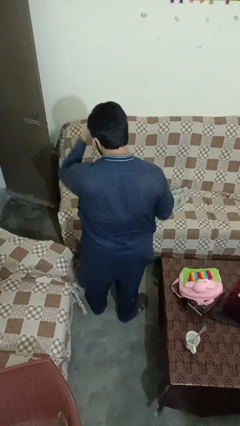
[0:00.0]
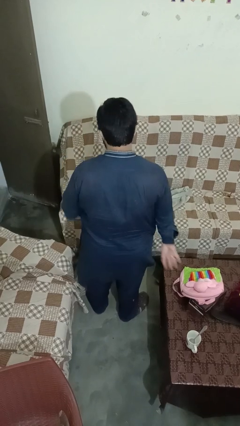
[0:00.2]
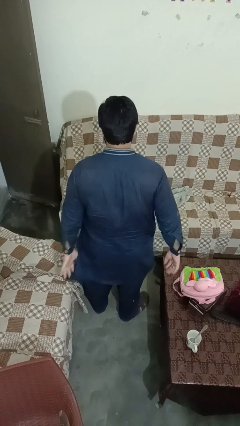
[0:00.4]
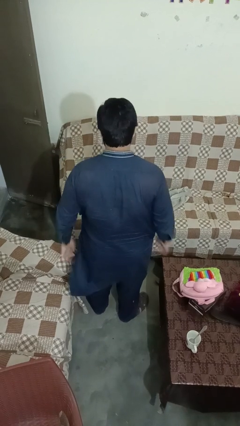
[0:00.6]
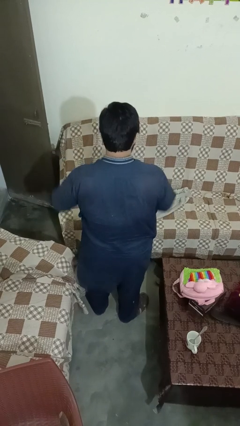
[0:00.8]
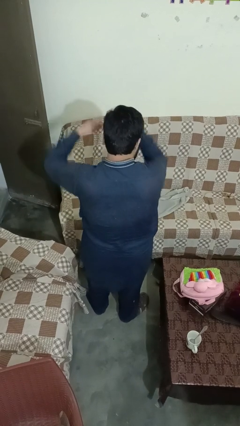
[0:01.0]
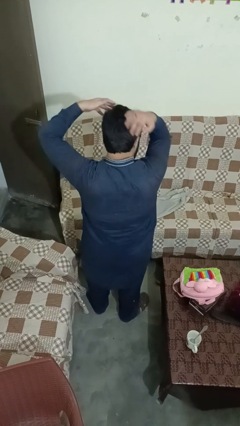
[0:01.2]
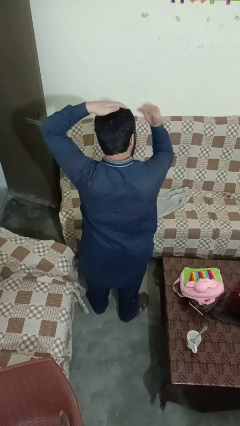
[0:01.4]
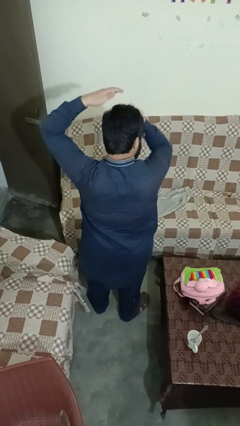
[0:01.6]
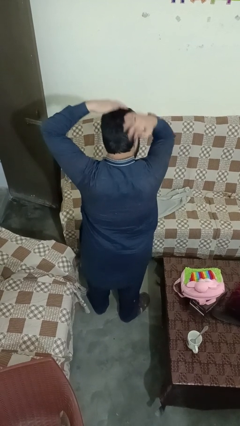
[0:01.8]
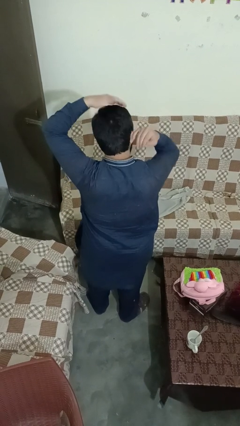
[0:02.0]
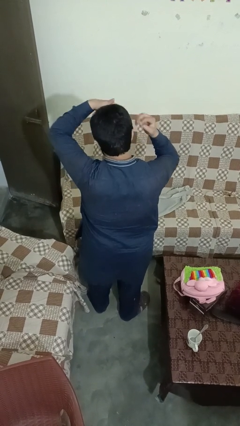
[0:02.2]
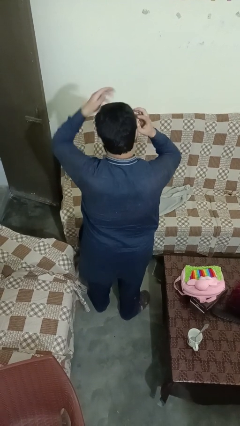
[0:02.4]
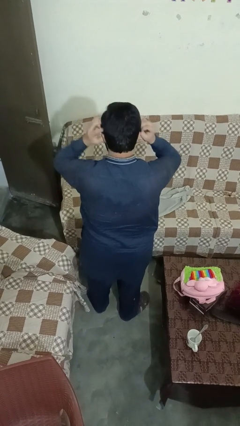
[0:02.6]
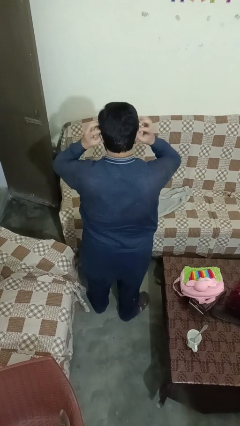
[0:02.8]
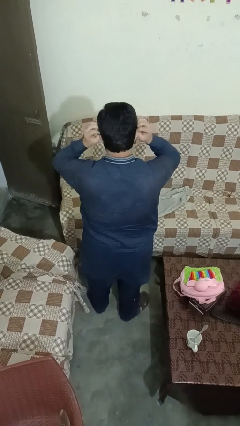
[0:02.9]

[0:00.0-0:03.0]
person strokes hair

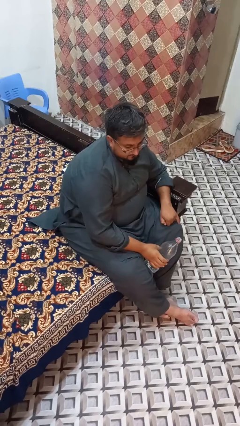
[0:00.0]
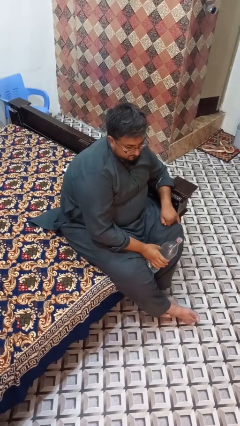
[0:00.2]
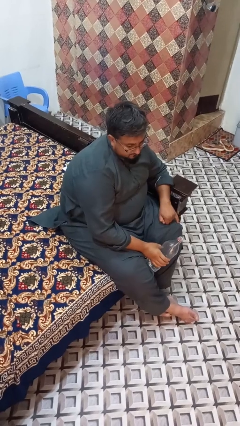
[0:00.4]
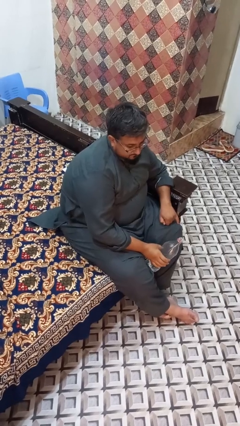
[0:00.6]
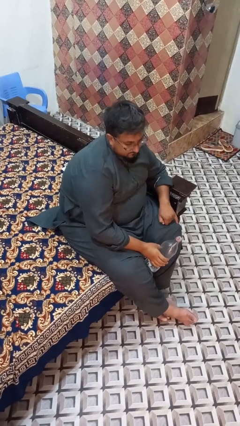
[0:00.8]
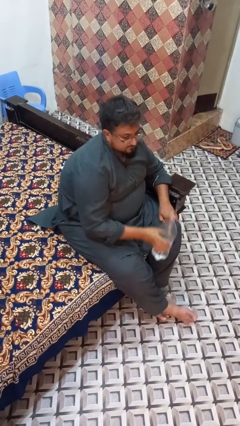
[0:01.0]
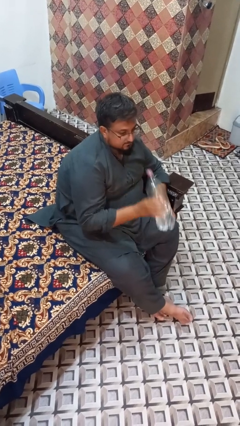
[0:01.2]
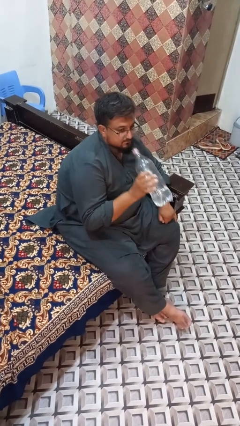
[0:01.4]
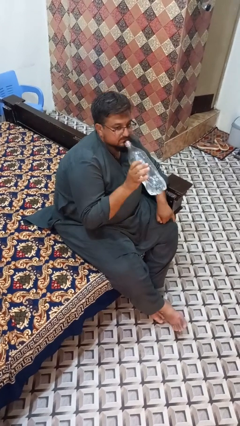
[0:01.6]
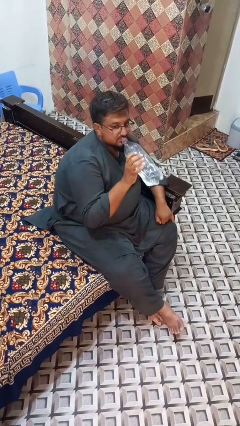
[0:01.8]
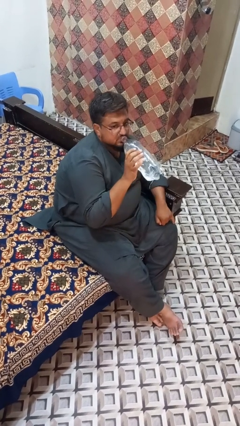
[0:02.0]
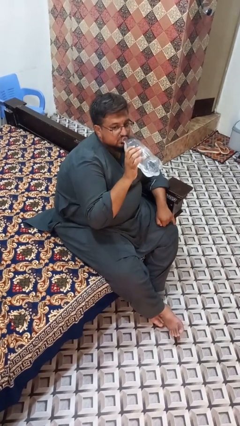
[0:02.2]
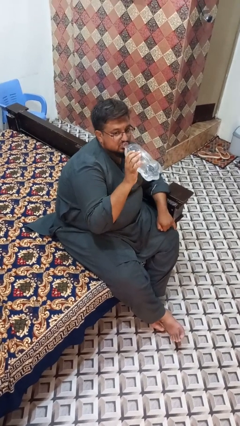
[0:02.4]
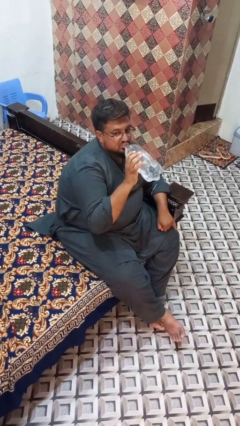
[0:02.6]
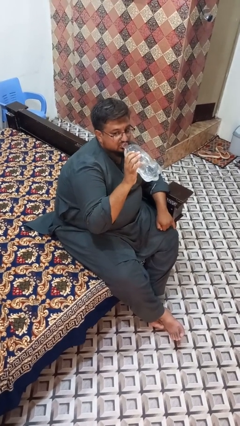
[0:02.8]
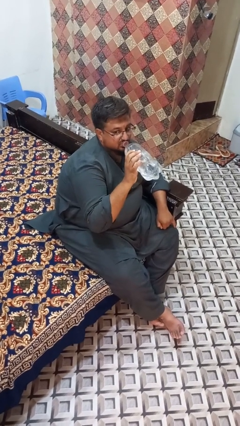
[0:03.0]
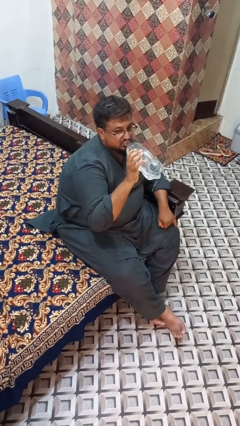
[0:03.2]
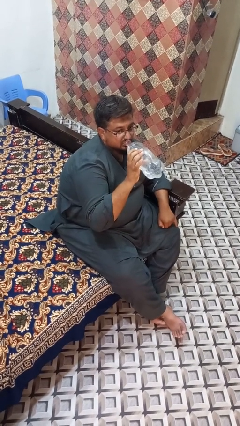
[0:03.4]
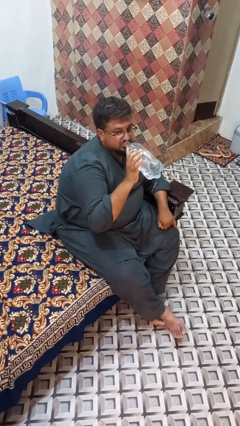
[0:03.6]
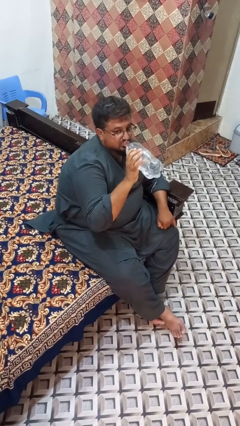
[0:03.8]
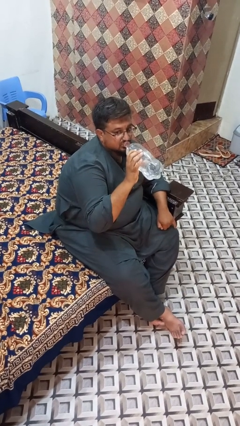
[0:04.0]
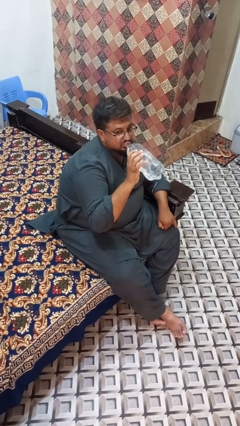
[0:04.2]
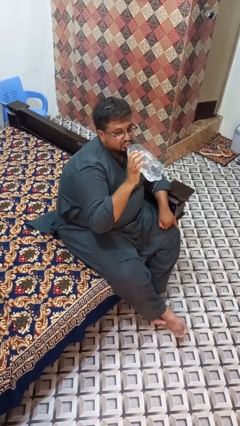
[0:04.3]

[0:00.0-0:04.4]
person drinks from bottle

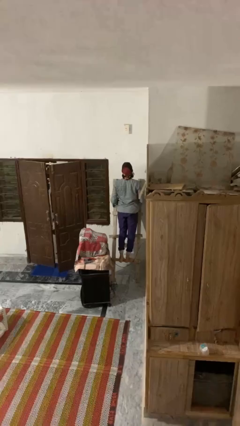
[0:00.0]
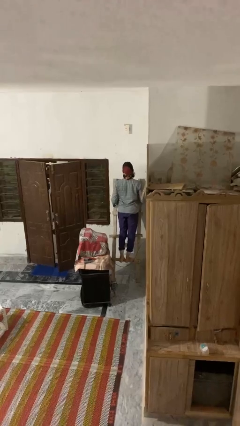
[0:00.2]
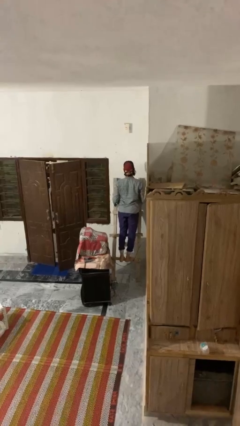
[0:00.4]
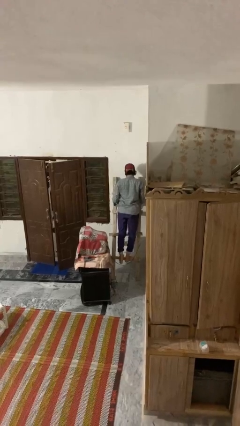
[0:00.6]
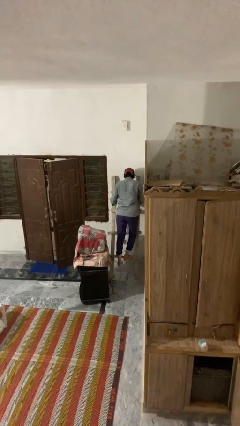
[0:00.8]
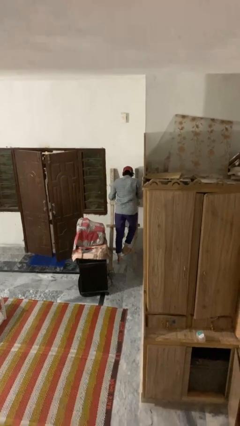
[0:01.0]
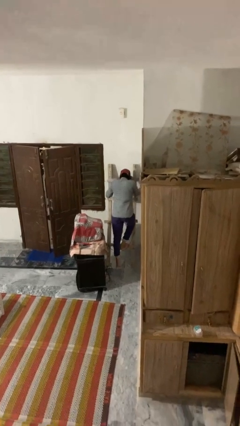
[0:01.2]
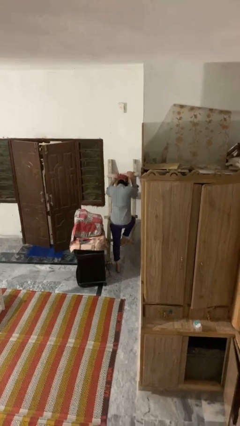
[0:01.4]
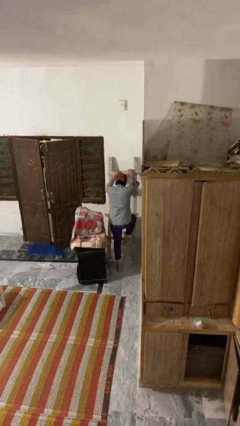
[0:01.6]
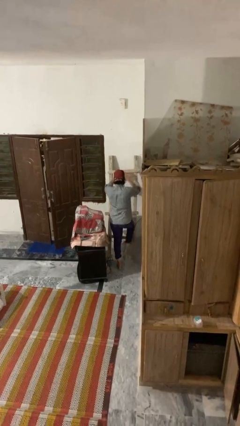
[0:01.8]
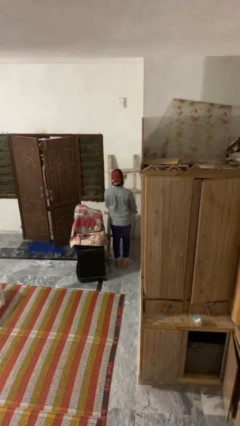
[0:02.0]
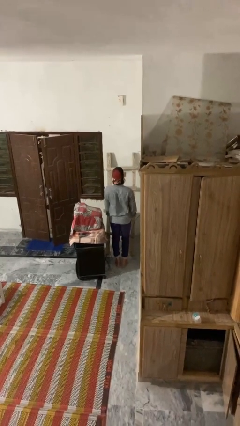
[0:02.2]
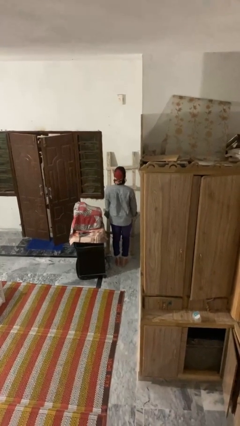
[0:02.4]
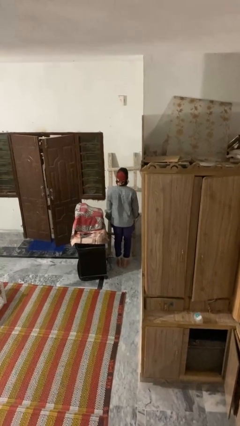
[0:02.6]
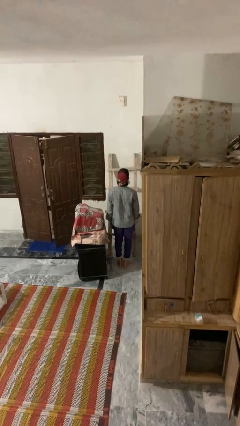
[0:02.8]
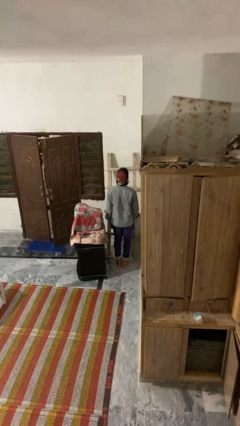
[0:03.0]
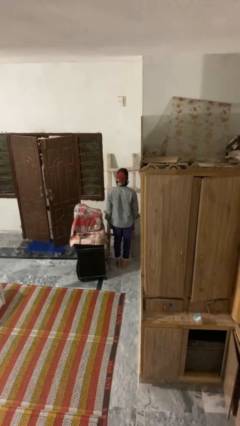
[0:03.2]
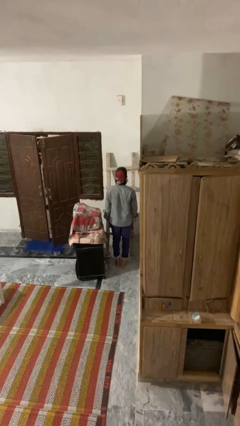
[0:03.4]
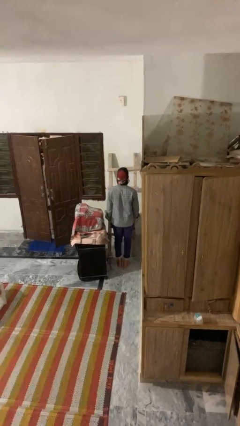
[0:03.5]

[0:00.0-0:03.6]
person climbs down ladder

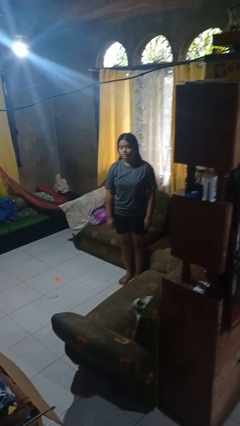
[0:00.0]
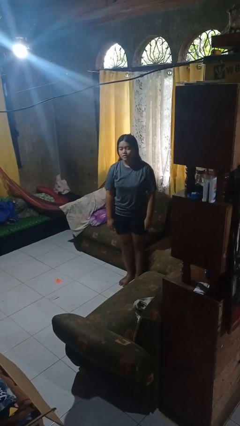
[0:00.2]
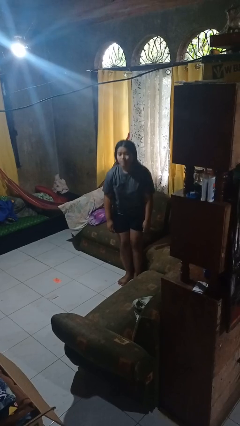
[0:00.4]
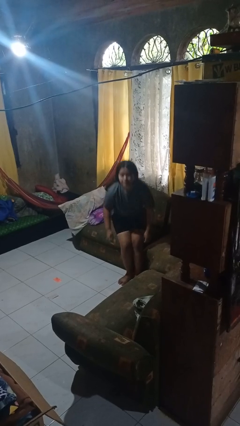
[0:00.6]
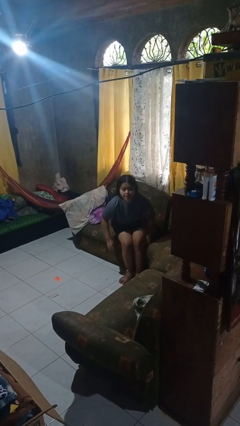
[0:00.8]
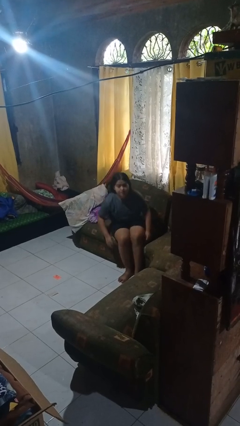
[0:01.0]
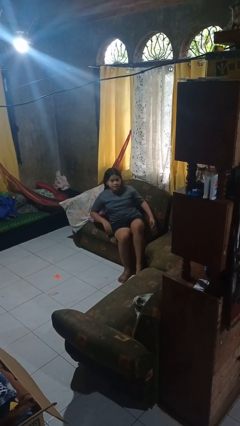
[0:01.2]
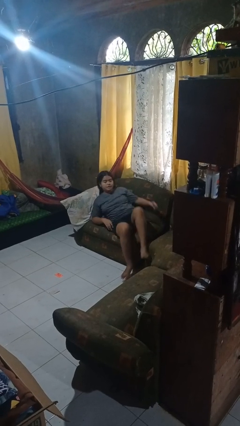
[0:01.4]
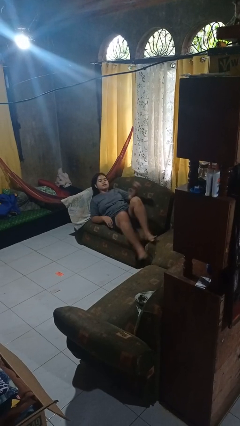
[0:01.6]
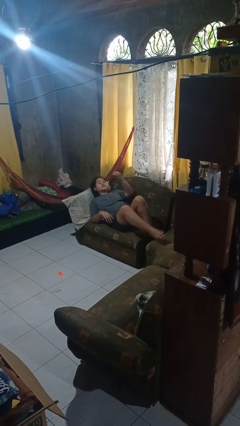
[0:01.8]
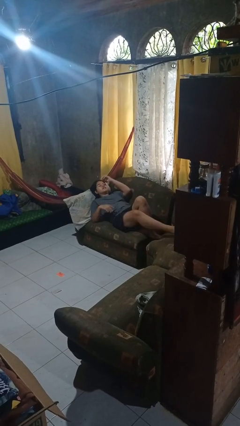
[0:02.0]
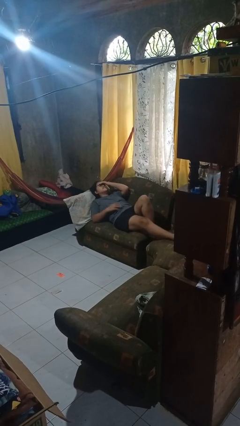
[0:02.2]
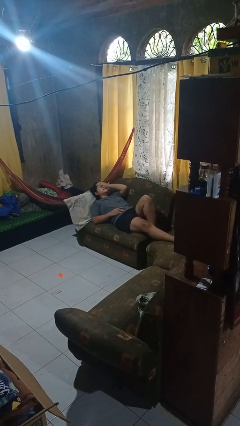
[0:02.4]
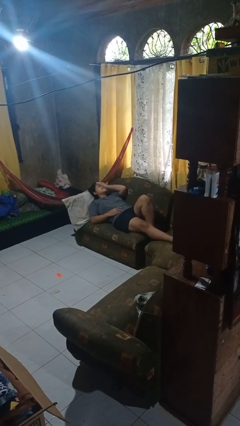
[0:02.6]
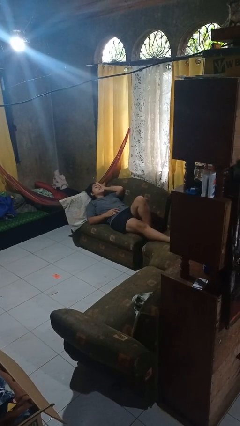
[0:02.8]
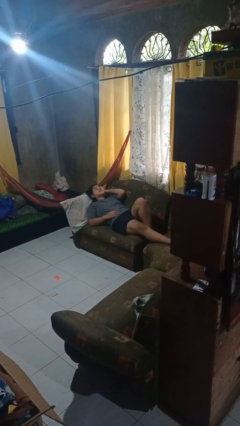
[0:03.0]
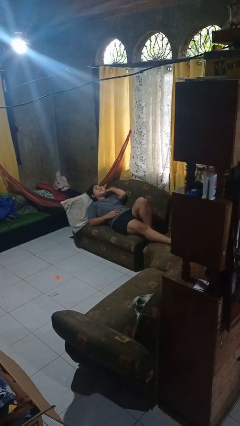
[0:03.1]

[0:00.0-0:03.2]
person lies down on couch

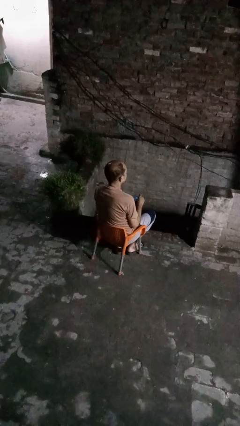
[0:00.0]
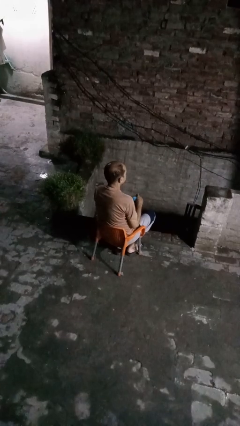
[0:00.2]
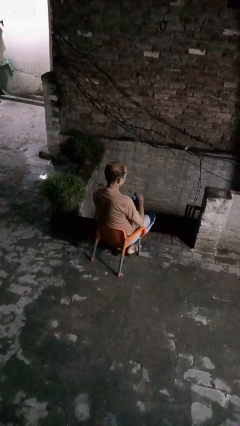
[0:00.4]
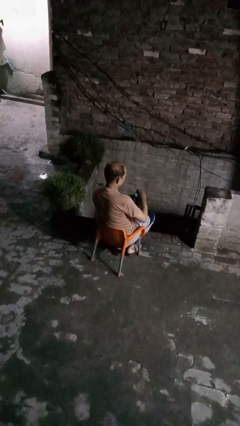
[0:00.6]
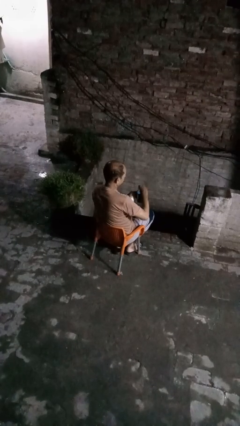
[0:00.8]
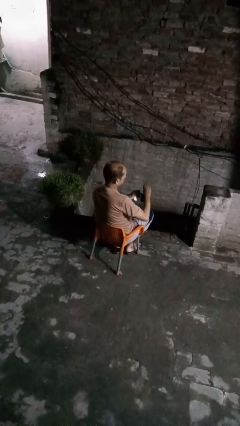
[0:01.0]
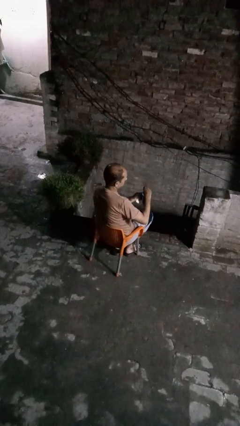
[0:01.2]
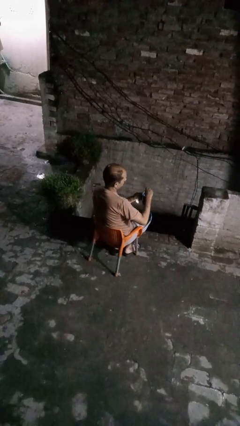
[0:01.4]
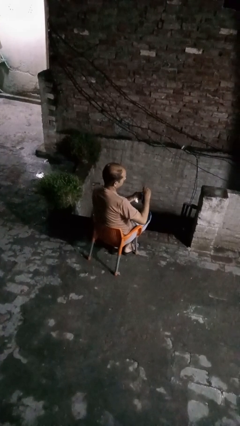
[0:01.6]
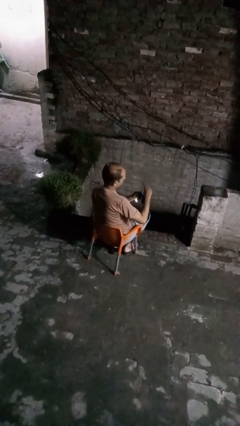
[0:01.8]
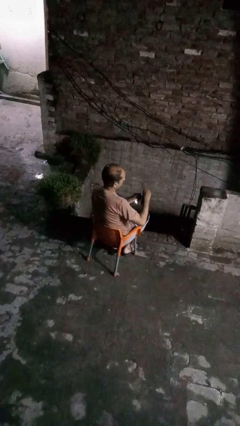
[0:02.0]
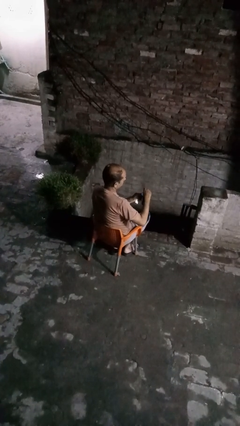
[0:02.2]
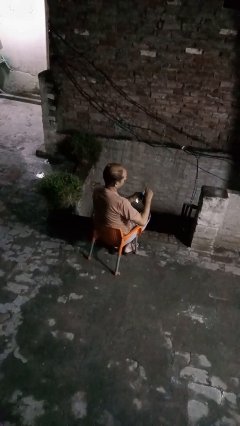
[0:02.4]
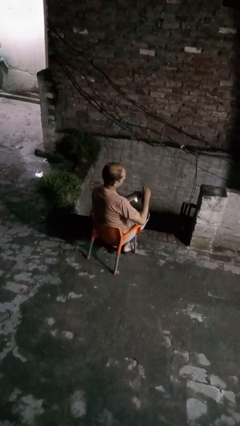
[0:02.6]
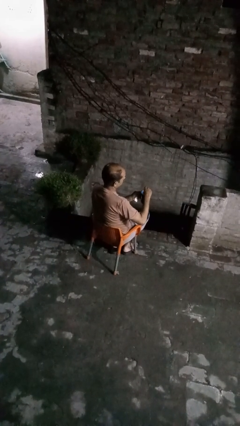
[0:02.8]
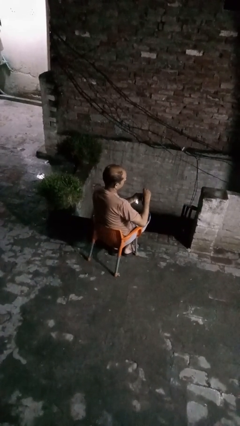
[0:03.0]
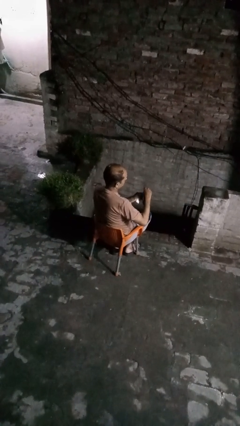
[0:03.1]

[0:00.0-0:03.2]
person stirs mug

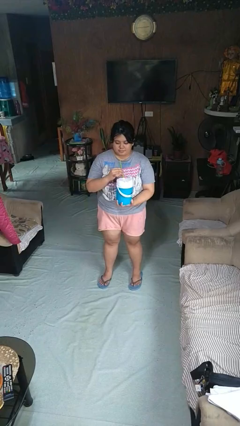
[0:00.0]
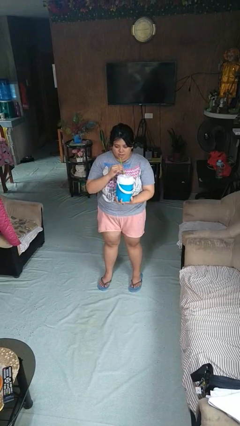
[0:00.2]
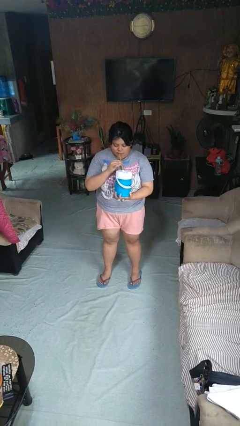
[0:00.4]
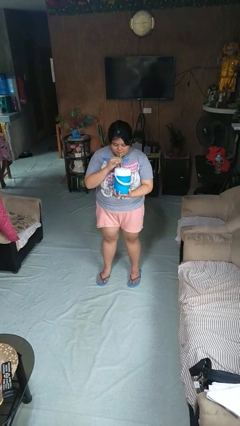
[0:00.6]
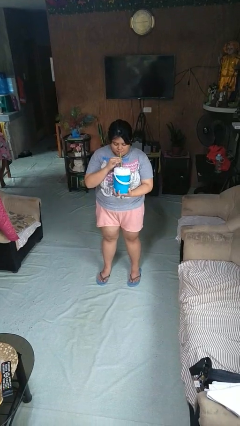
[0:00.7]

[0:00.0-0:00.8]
person drinks from straw
